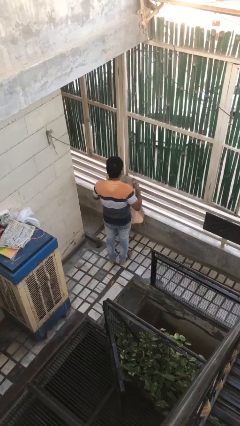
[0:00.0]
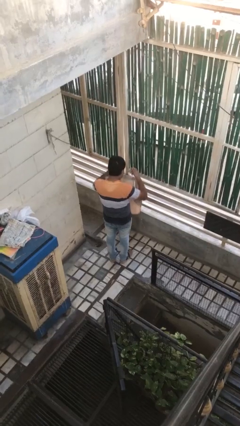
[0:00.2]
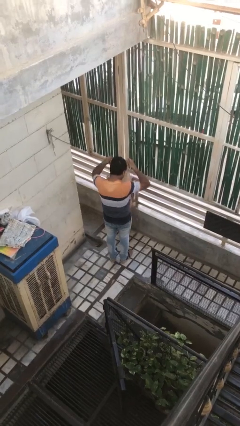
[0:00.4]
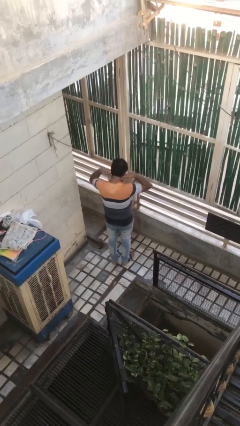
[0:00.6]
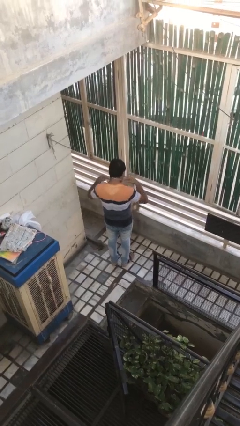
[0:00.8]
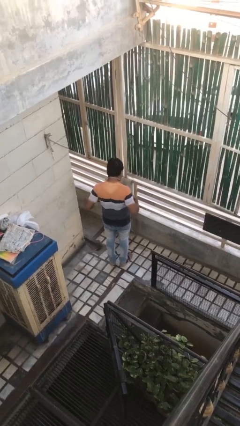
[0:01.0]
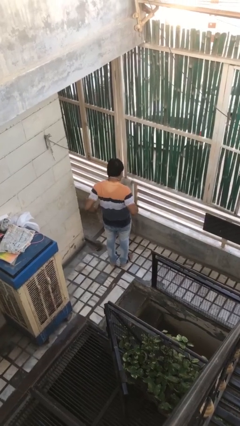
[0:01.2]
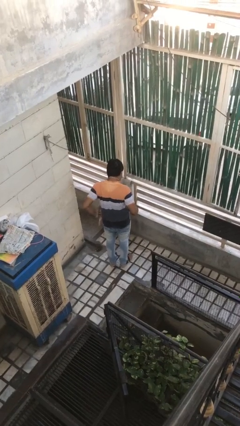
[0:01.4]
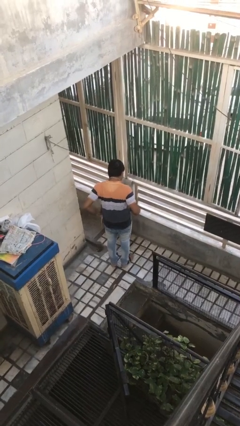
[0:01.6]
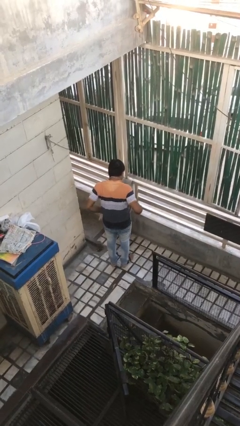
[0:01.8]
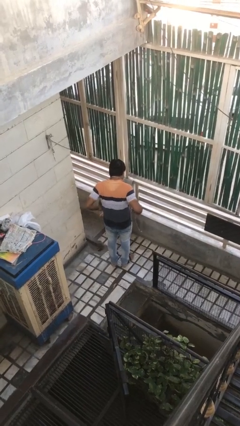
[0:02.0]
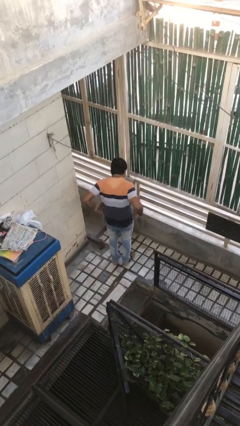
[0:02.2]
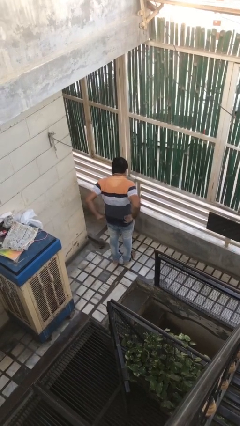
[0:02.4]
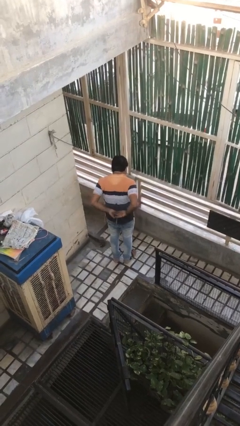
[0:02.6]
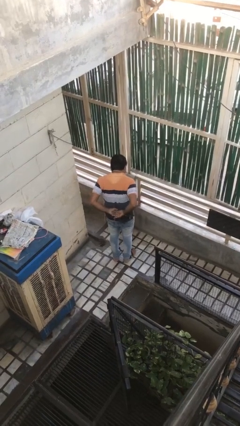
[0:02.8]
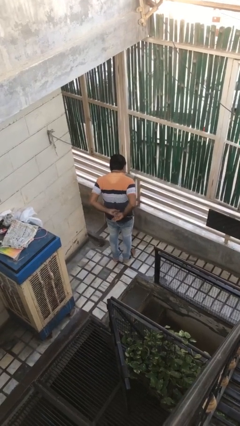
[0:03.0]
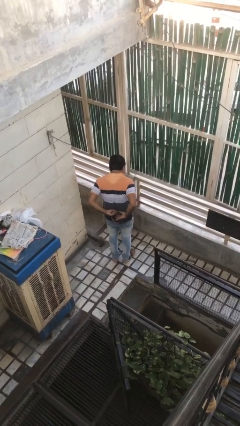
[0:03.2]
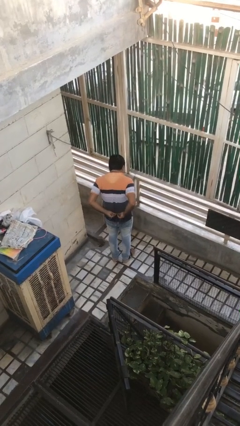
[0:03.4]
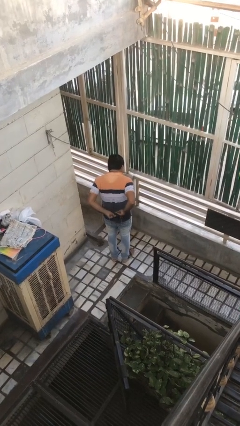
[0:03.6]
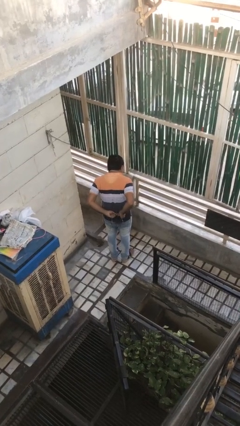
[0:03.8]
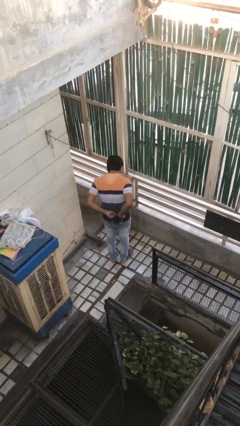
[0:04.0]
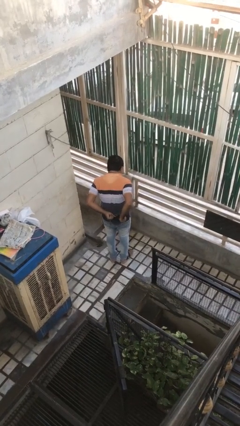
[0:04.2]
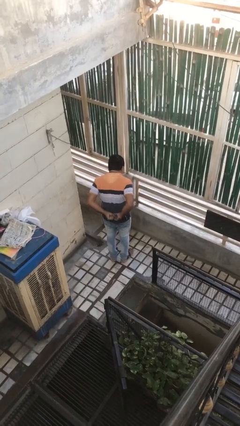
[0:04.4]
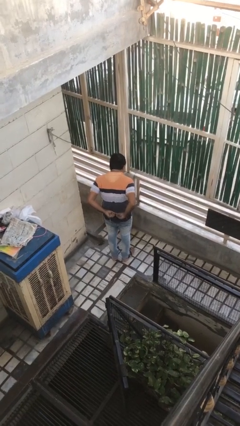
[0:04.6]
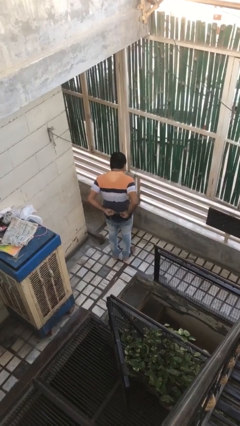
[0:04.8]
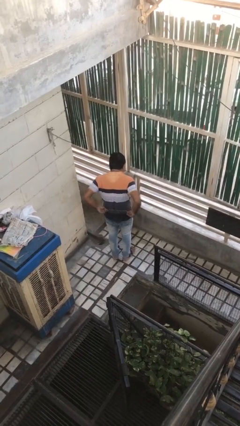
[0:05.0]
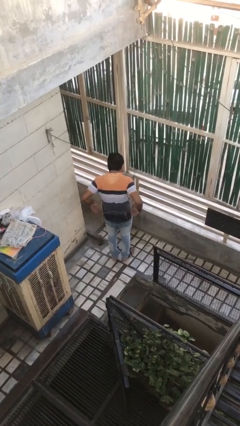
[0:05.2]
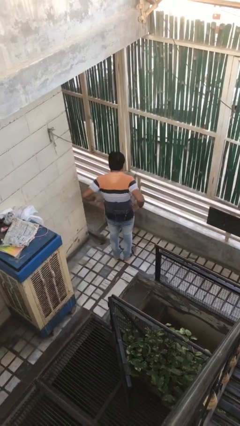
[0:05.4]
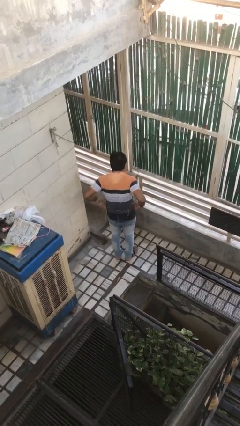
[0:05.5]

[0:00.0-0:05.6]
person puts on apron

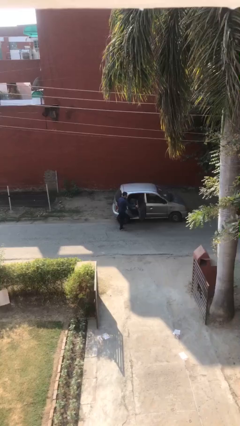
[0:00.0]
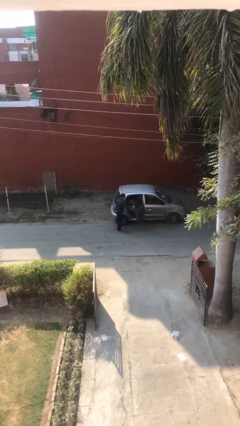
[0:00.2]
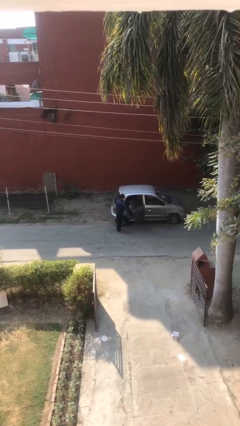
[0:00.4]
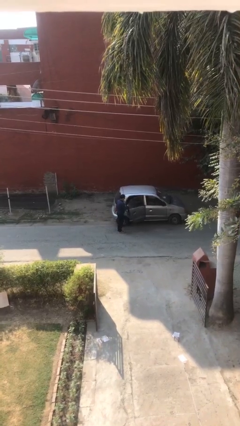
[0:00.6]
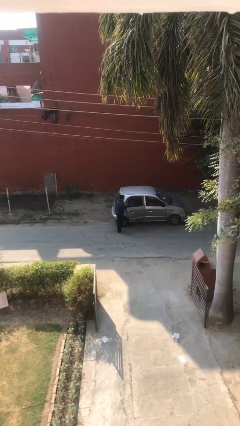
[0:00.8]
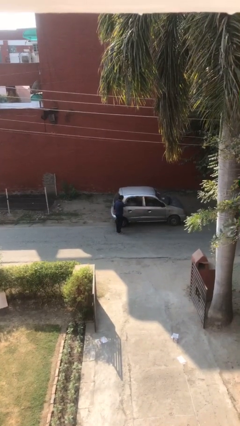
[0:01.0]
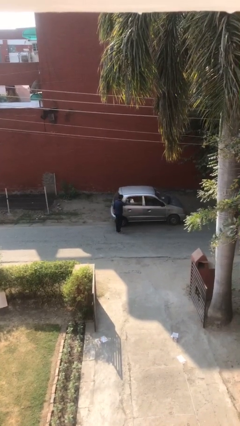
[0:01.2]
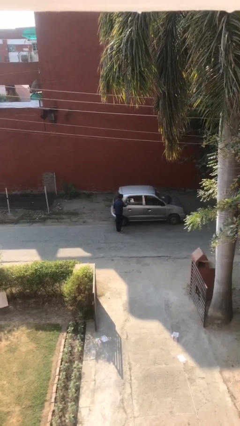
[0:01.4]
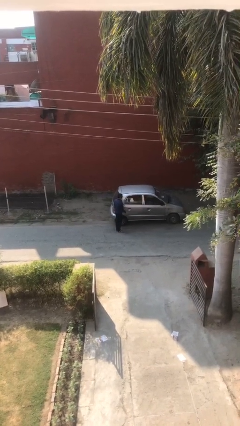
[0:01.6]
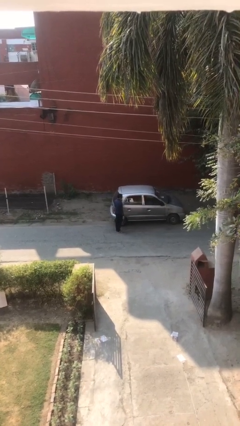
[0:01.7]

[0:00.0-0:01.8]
person closes car door

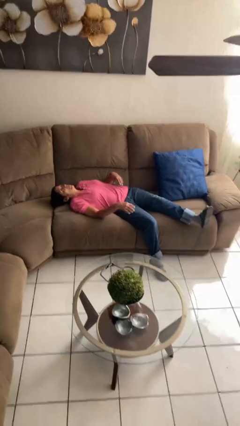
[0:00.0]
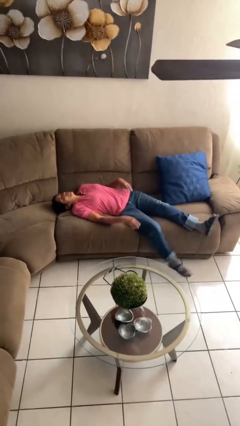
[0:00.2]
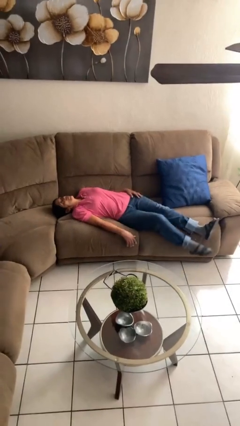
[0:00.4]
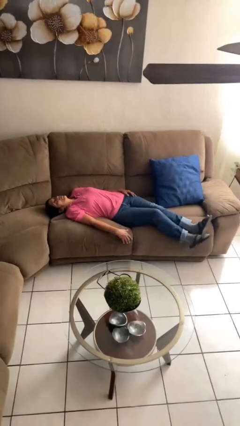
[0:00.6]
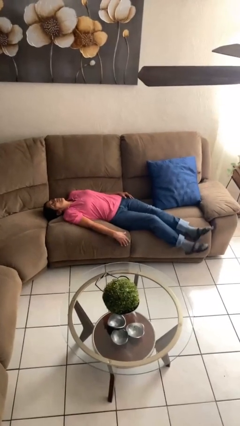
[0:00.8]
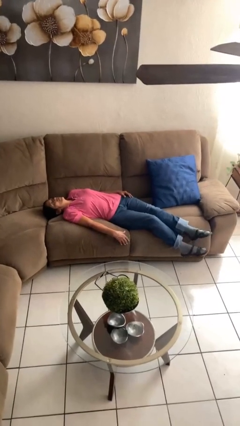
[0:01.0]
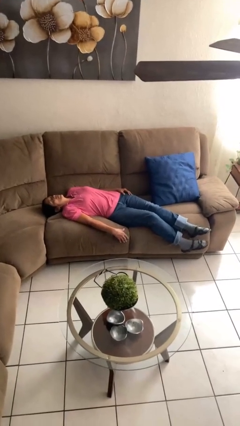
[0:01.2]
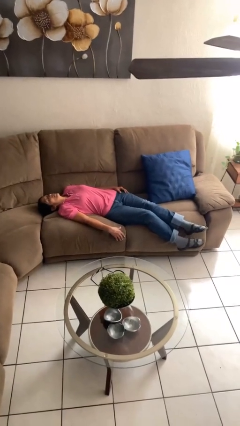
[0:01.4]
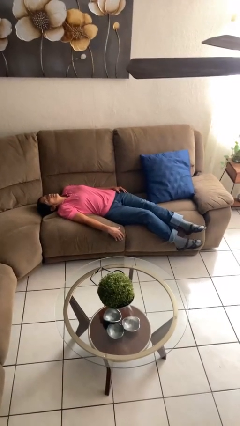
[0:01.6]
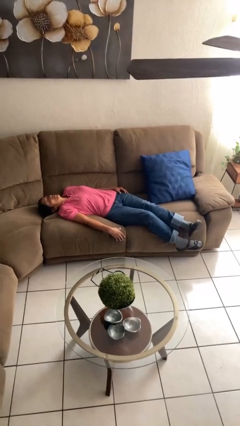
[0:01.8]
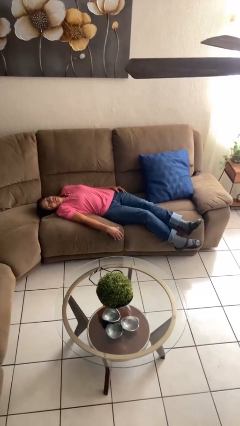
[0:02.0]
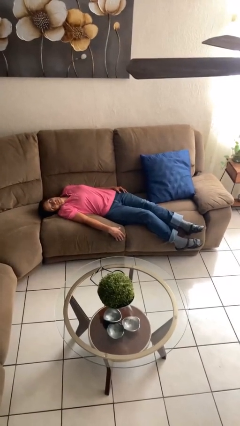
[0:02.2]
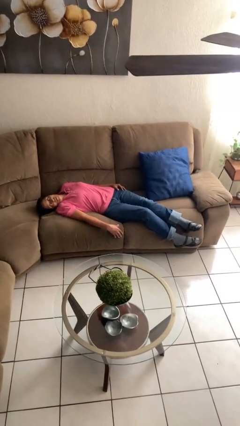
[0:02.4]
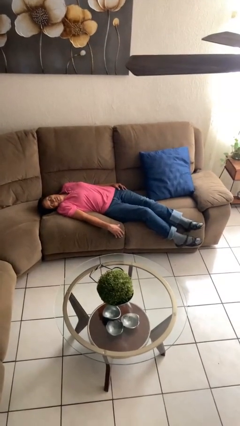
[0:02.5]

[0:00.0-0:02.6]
person lies down on couch

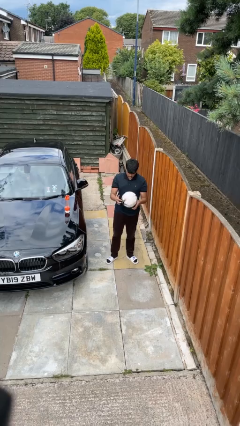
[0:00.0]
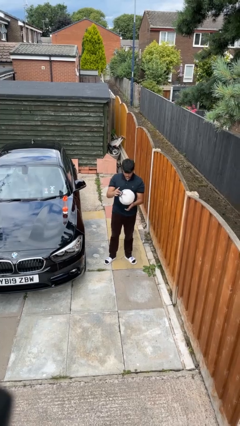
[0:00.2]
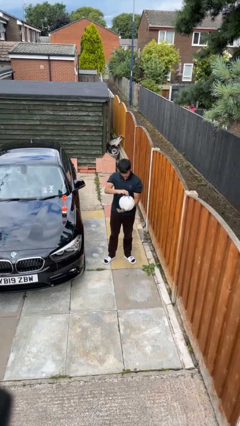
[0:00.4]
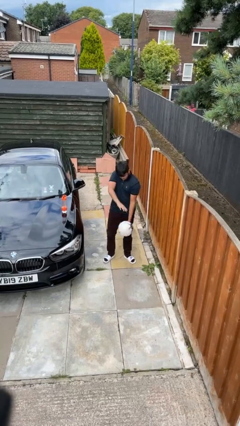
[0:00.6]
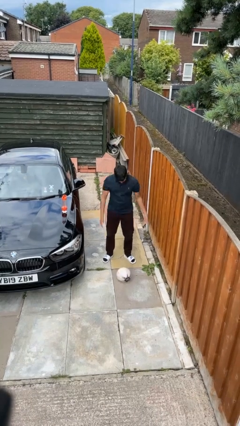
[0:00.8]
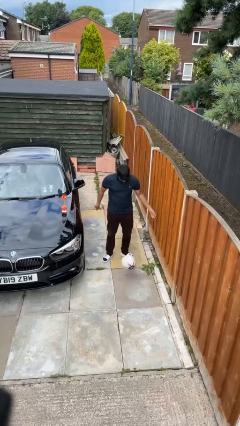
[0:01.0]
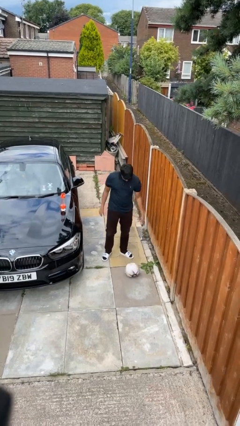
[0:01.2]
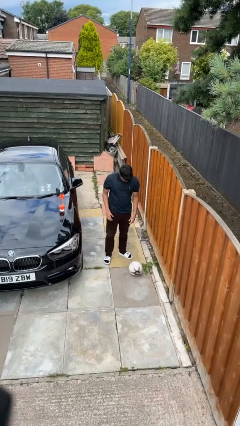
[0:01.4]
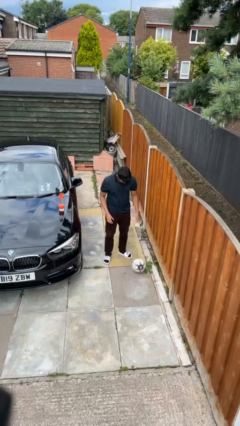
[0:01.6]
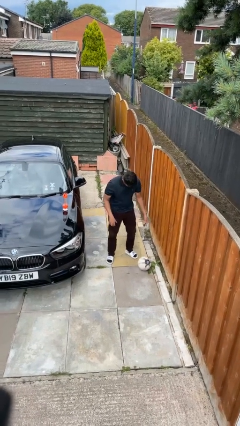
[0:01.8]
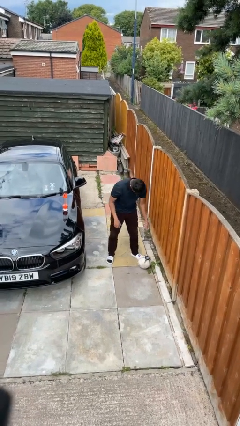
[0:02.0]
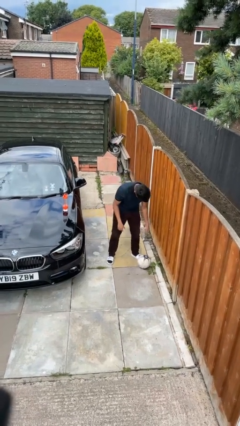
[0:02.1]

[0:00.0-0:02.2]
person drops object

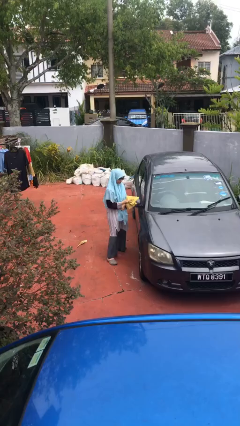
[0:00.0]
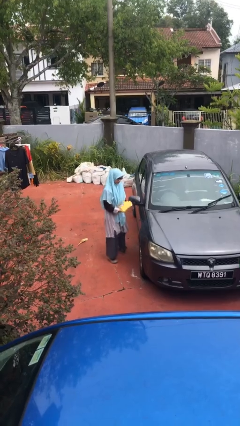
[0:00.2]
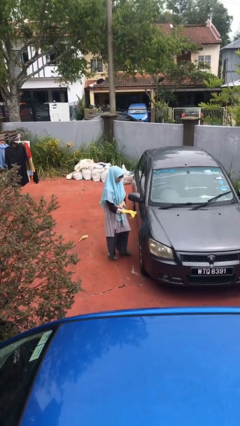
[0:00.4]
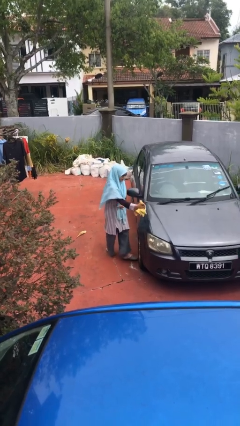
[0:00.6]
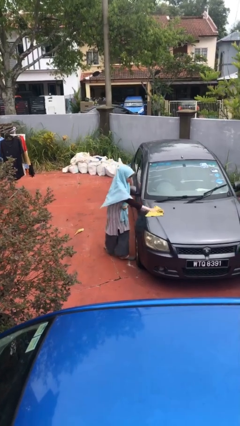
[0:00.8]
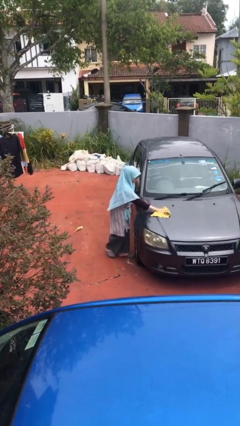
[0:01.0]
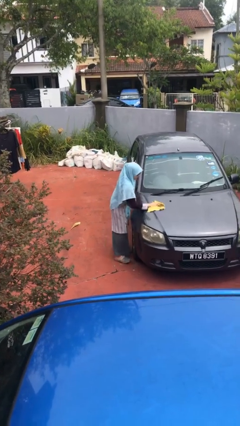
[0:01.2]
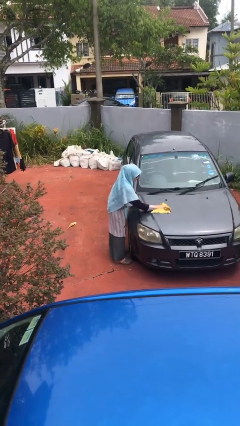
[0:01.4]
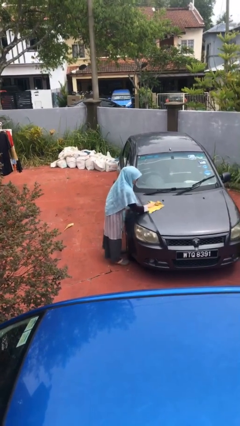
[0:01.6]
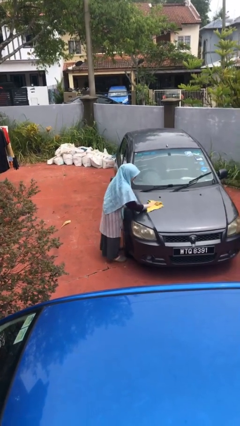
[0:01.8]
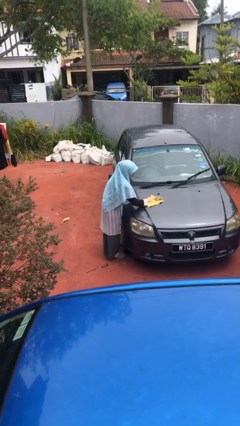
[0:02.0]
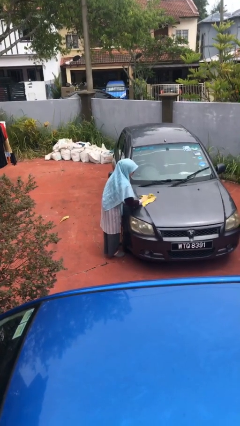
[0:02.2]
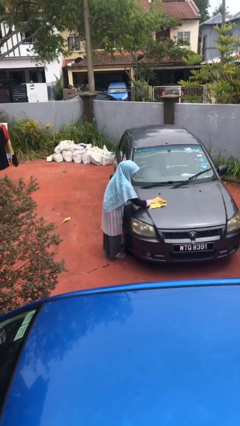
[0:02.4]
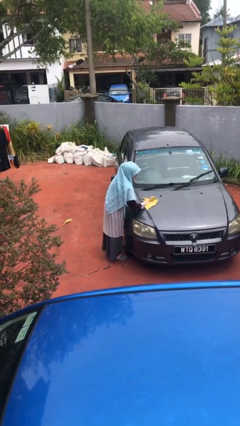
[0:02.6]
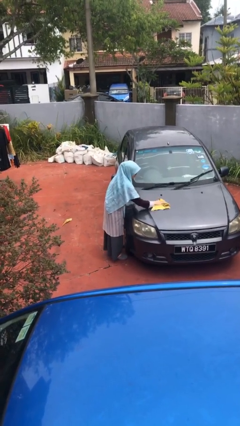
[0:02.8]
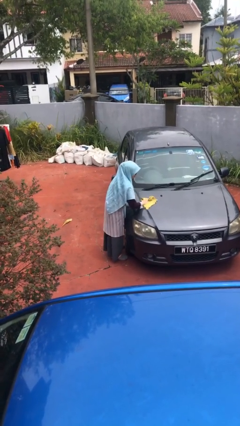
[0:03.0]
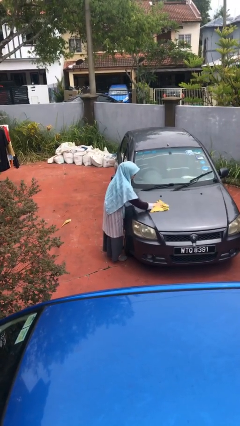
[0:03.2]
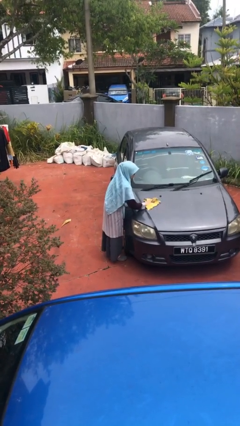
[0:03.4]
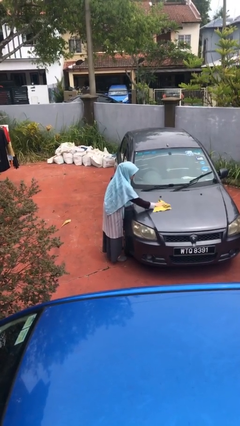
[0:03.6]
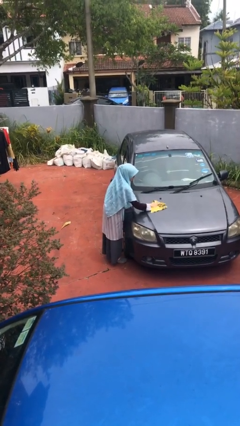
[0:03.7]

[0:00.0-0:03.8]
person polishes car with rag

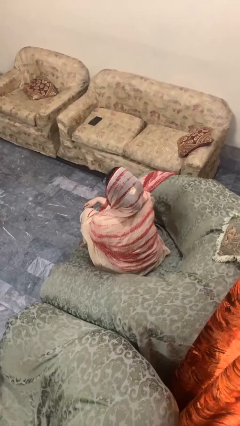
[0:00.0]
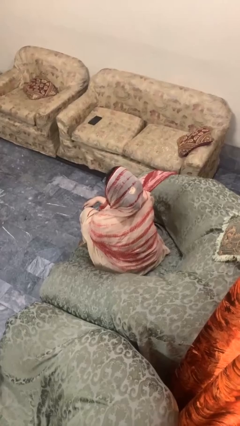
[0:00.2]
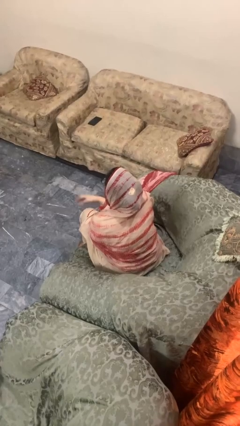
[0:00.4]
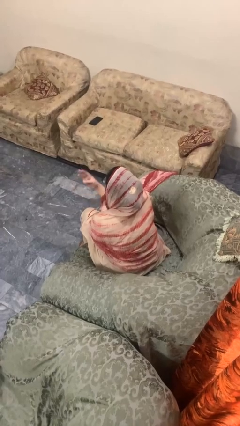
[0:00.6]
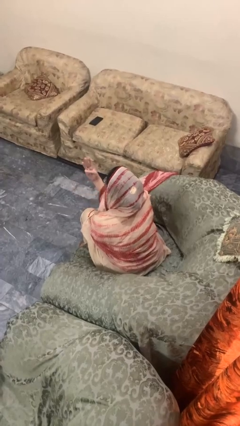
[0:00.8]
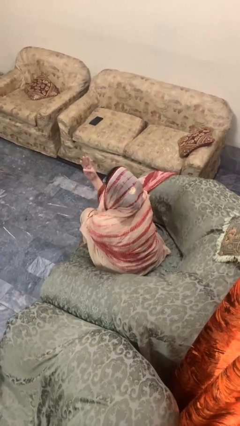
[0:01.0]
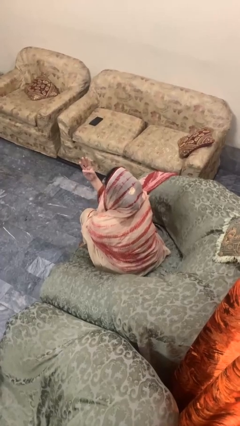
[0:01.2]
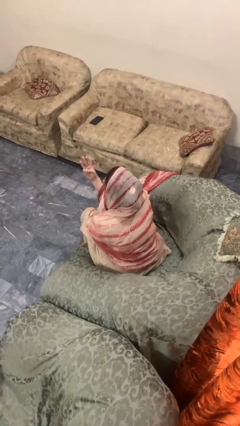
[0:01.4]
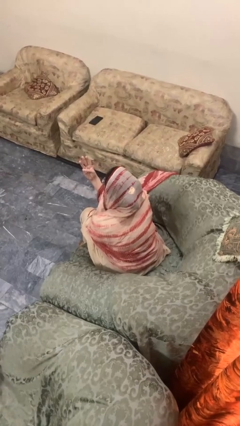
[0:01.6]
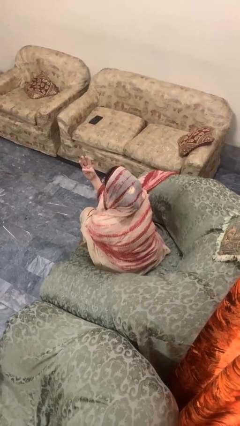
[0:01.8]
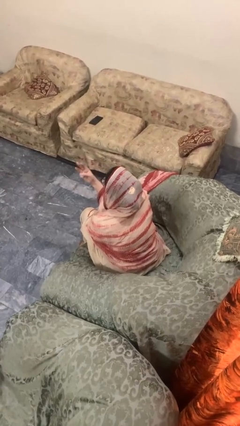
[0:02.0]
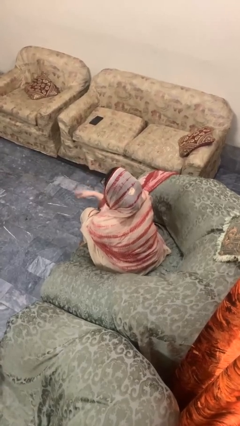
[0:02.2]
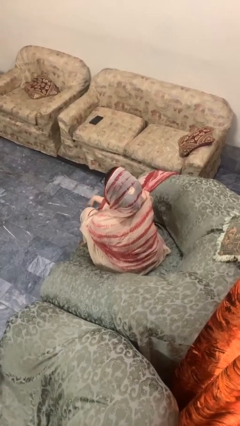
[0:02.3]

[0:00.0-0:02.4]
person gestures number three
